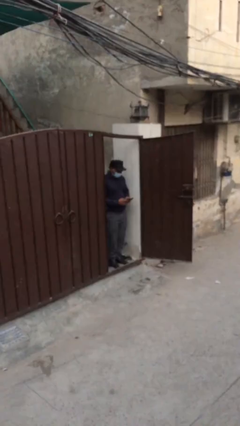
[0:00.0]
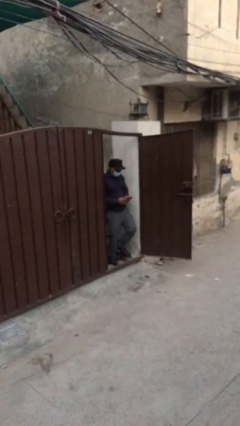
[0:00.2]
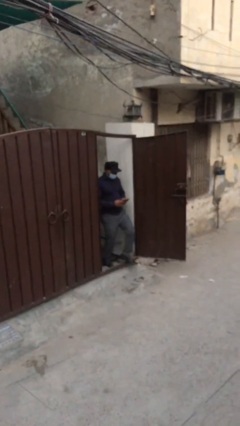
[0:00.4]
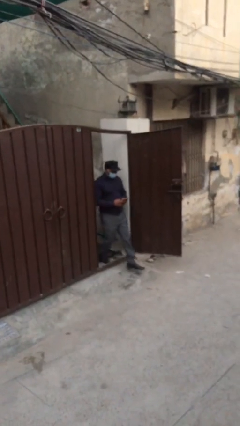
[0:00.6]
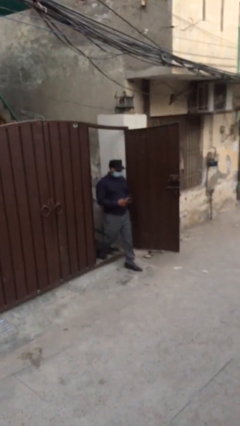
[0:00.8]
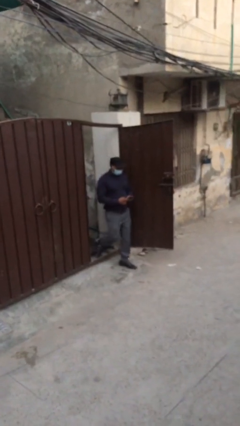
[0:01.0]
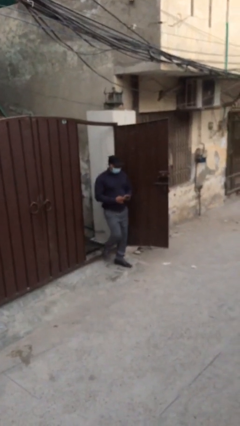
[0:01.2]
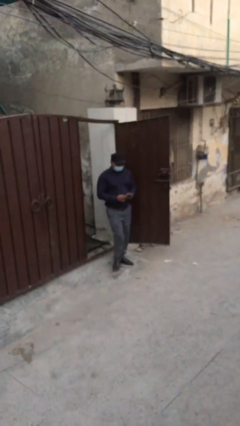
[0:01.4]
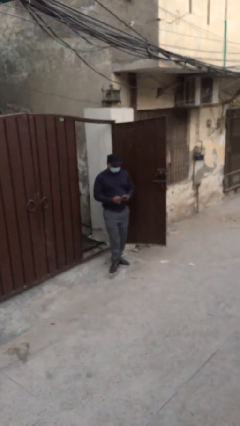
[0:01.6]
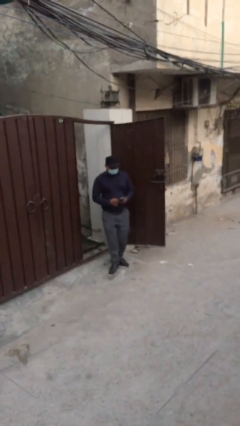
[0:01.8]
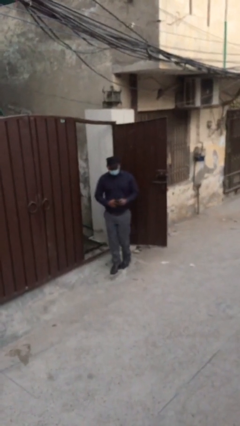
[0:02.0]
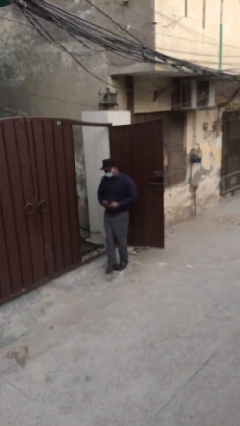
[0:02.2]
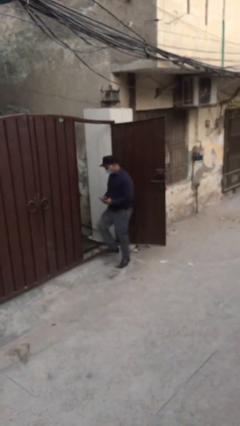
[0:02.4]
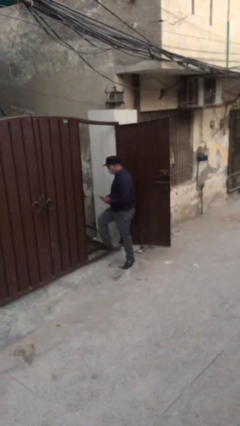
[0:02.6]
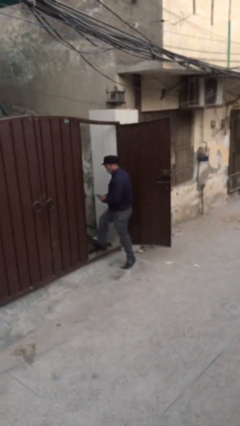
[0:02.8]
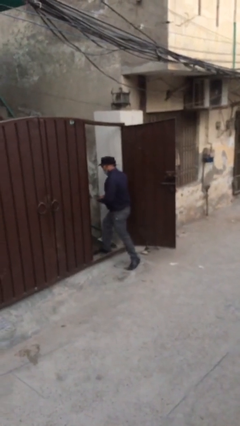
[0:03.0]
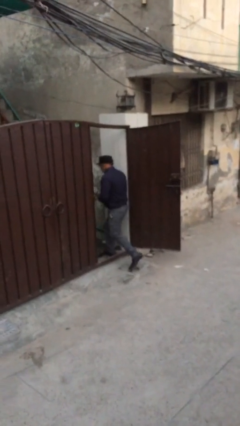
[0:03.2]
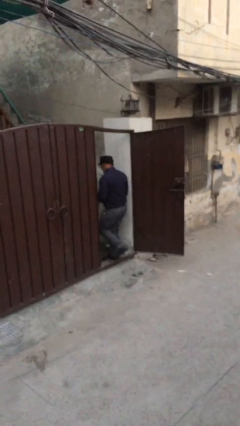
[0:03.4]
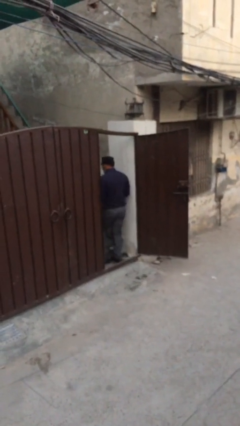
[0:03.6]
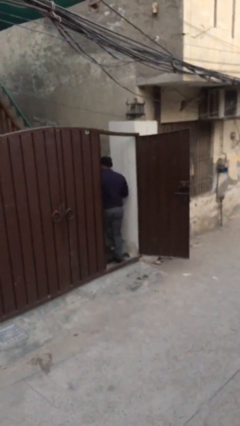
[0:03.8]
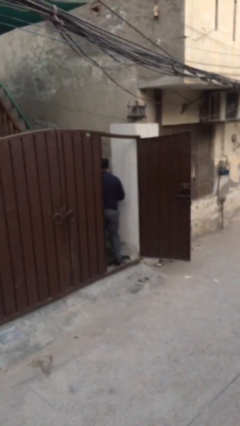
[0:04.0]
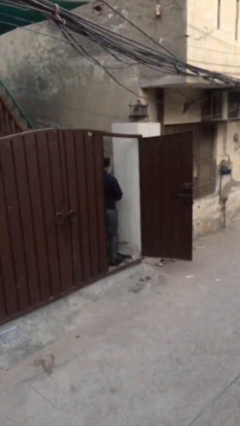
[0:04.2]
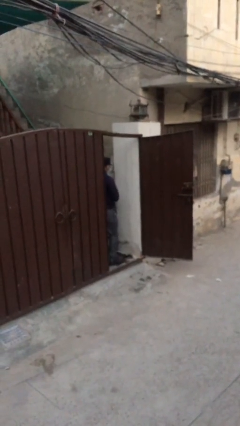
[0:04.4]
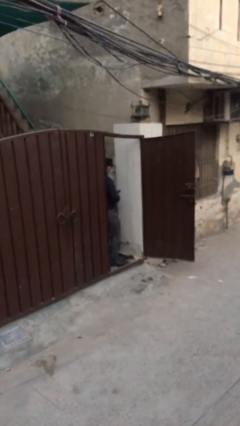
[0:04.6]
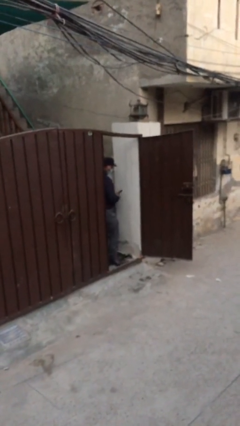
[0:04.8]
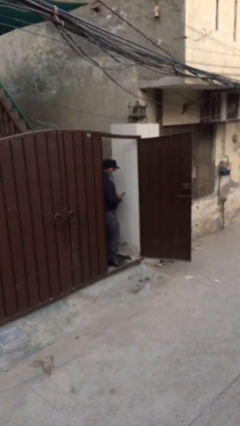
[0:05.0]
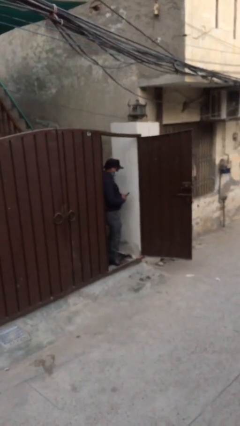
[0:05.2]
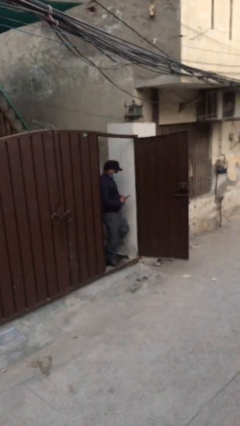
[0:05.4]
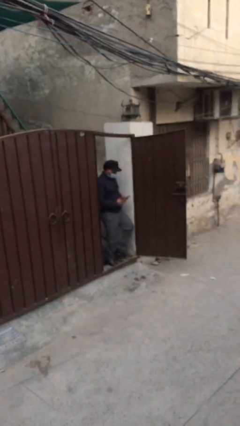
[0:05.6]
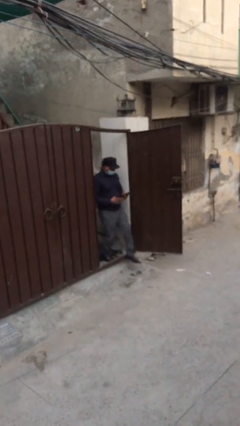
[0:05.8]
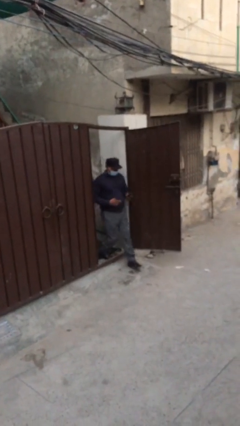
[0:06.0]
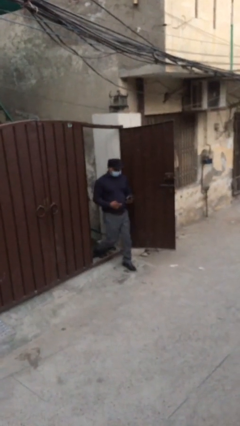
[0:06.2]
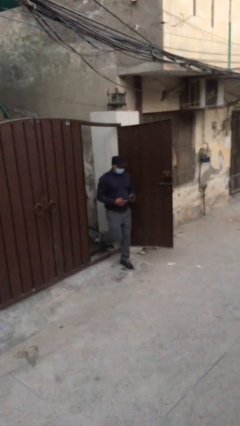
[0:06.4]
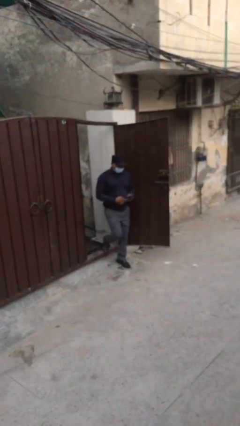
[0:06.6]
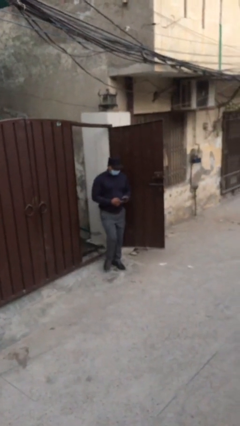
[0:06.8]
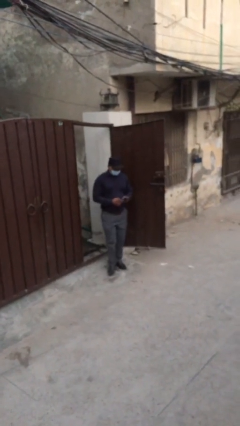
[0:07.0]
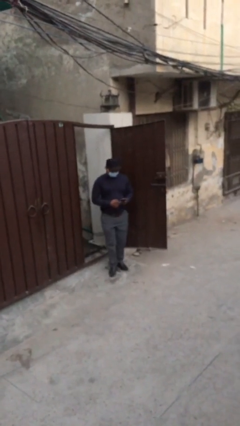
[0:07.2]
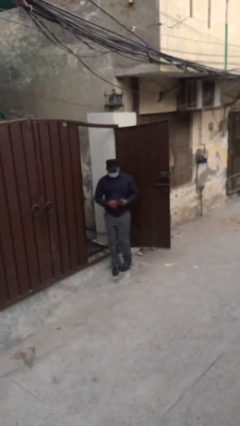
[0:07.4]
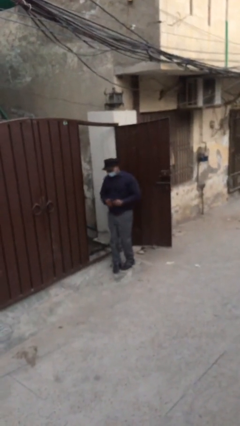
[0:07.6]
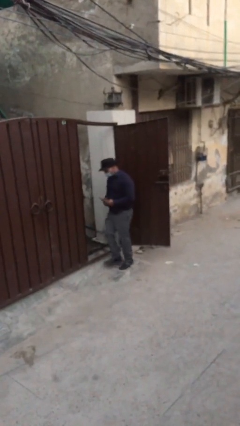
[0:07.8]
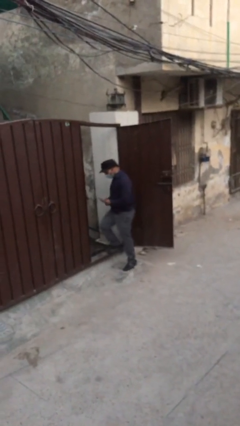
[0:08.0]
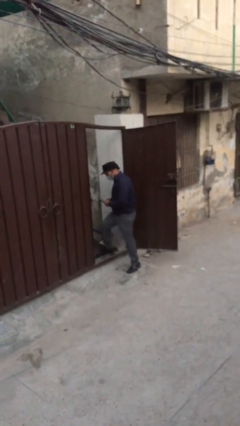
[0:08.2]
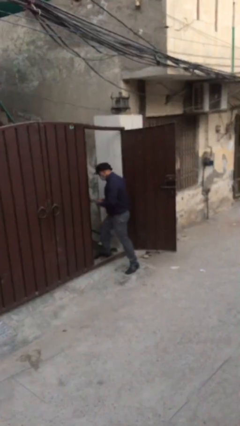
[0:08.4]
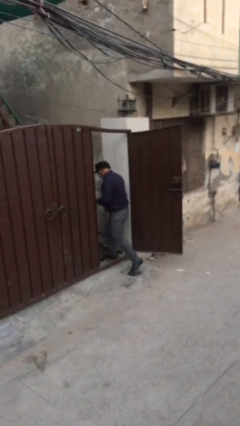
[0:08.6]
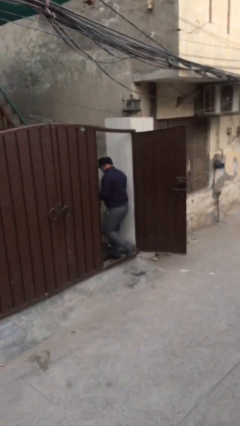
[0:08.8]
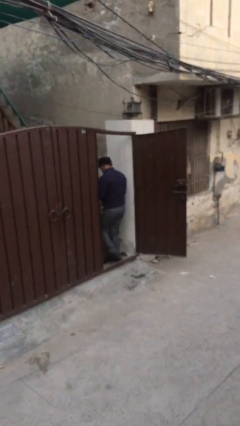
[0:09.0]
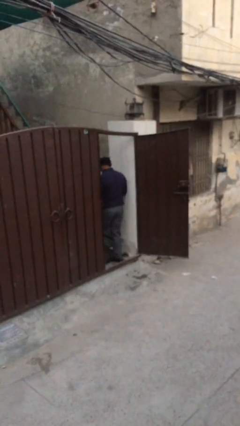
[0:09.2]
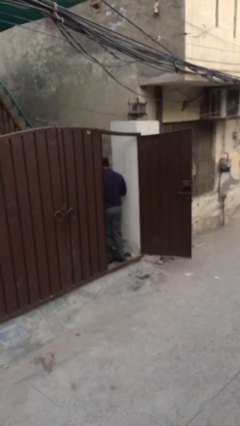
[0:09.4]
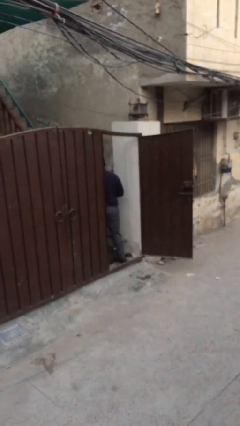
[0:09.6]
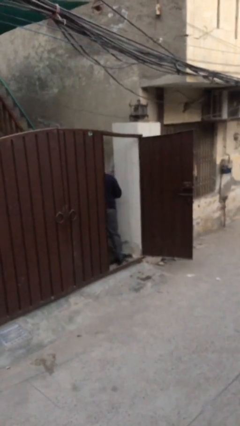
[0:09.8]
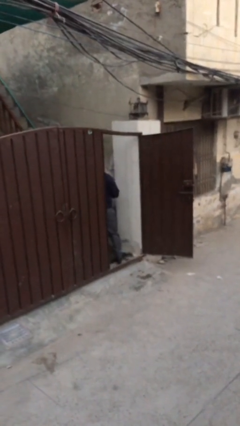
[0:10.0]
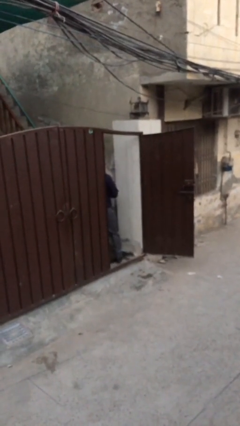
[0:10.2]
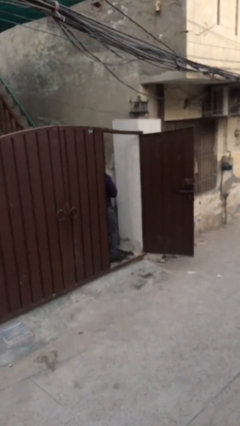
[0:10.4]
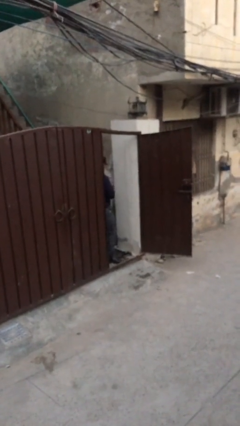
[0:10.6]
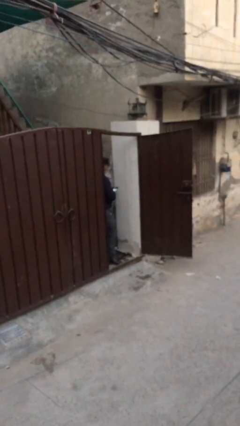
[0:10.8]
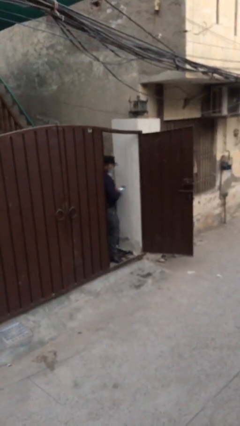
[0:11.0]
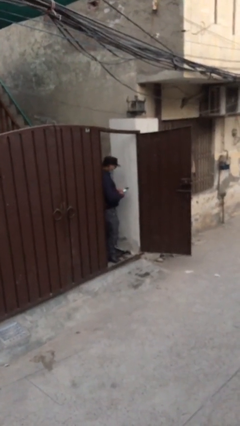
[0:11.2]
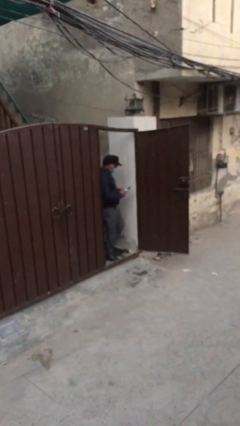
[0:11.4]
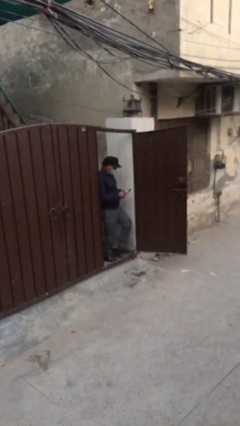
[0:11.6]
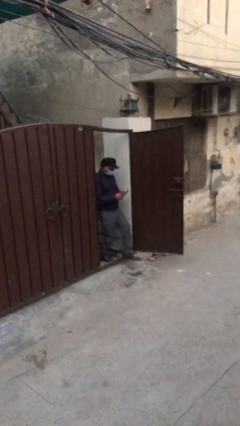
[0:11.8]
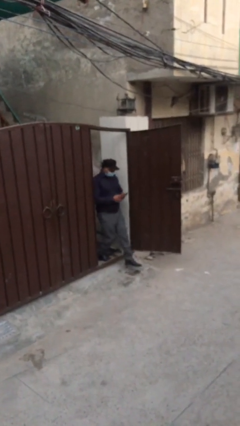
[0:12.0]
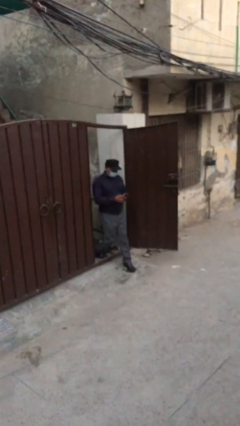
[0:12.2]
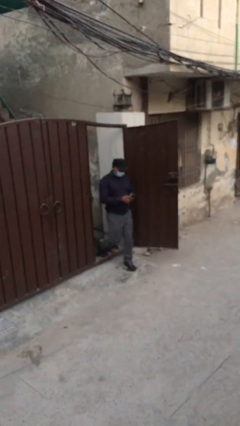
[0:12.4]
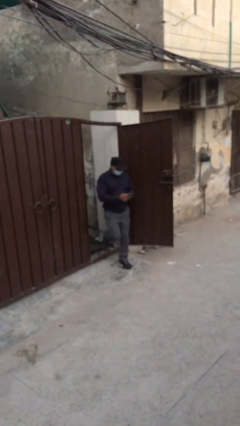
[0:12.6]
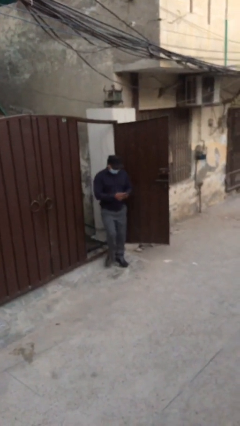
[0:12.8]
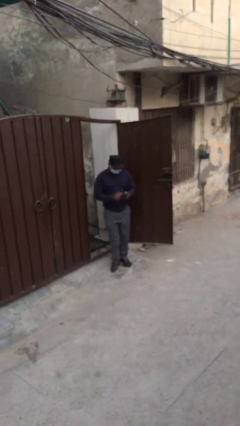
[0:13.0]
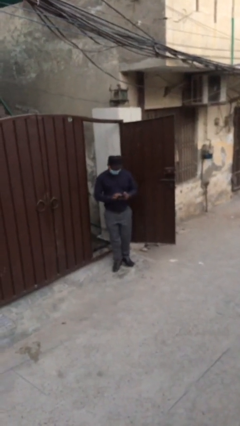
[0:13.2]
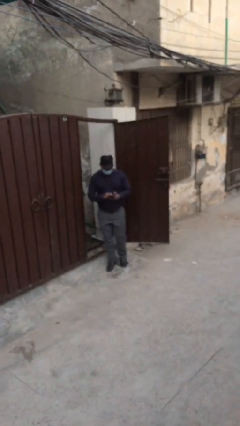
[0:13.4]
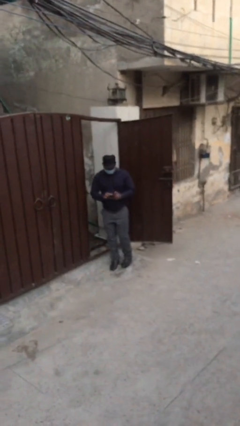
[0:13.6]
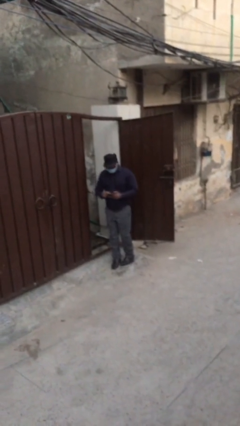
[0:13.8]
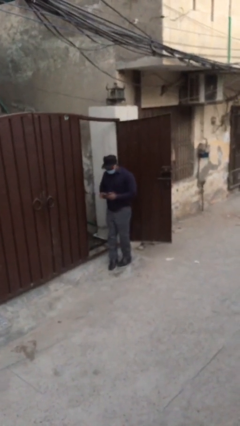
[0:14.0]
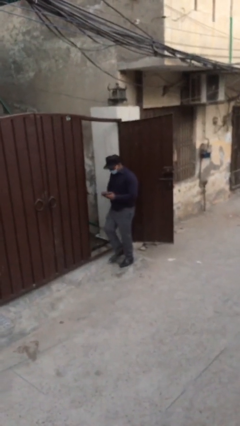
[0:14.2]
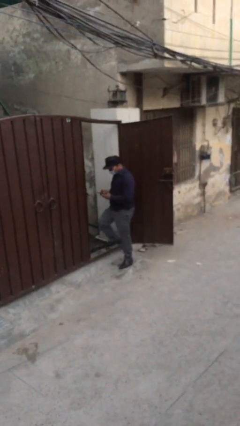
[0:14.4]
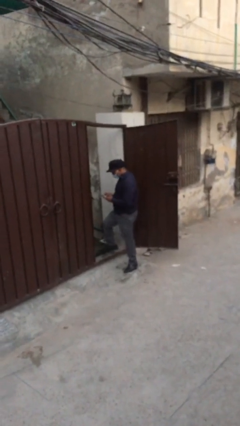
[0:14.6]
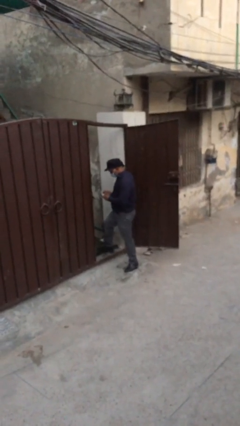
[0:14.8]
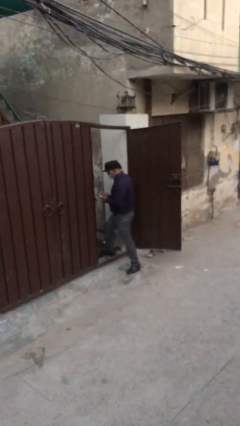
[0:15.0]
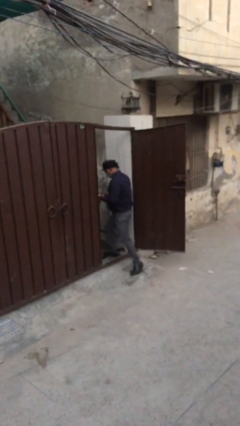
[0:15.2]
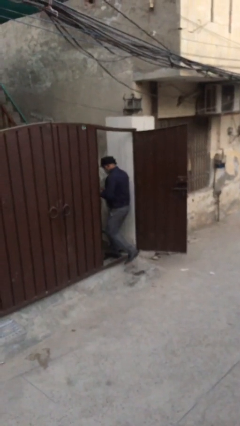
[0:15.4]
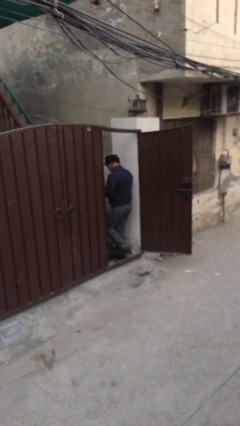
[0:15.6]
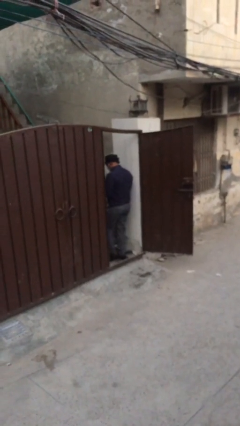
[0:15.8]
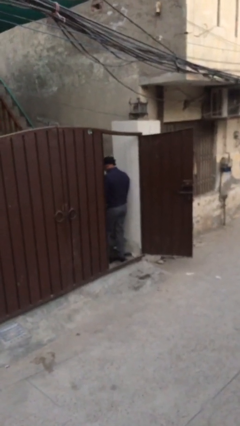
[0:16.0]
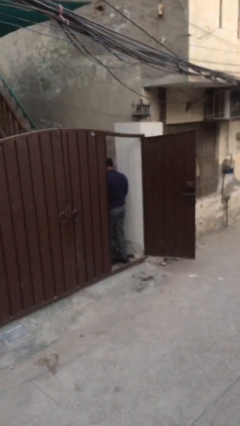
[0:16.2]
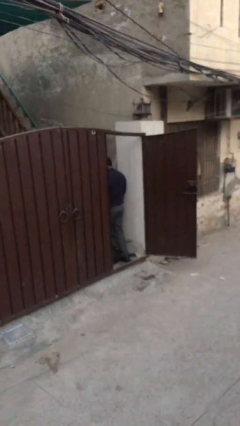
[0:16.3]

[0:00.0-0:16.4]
person texts on phone

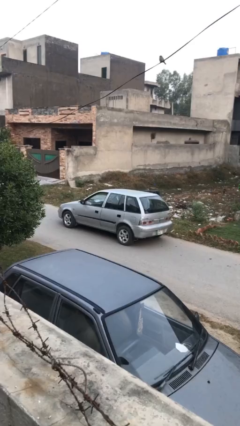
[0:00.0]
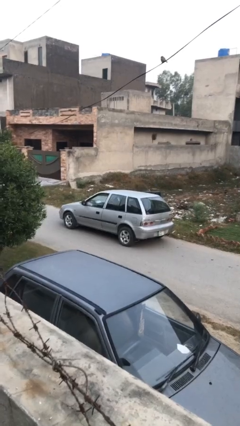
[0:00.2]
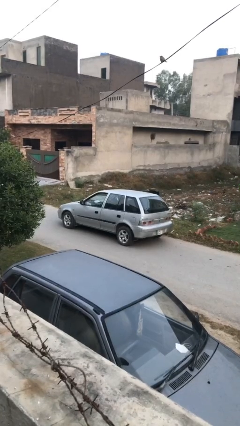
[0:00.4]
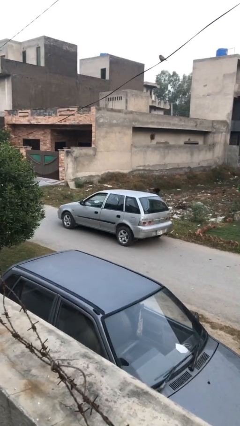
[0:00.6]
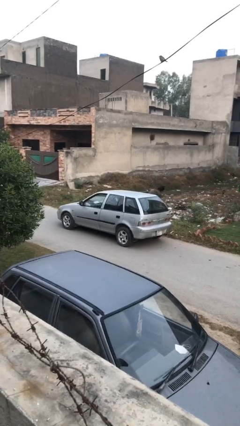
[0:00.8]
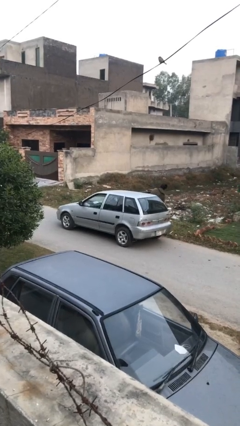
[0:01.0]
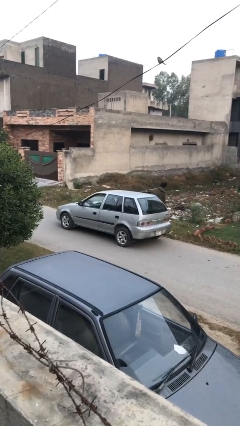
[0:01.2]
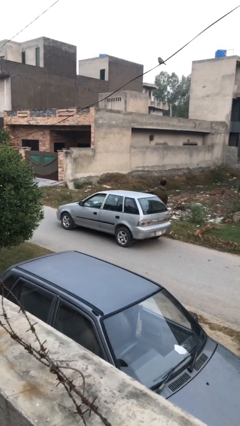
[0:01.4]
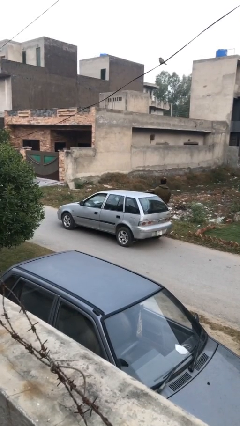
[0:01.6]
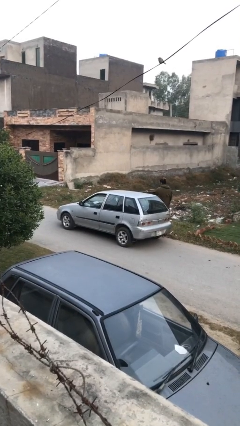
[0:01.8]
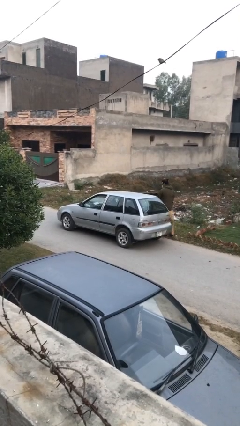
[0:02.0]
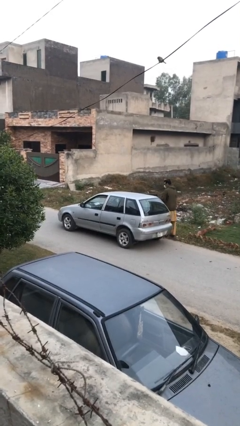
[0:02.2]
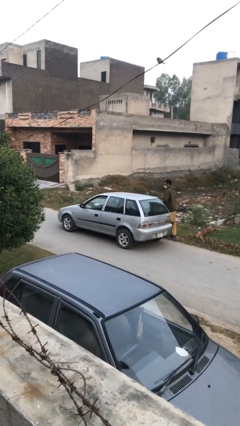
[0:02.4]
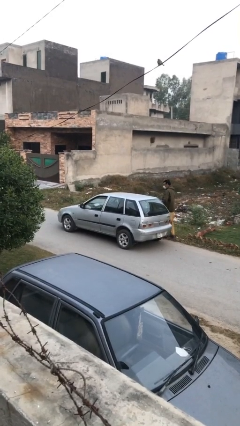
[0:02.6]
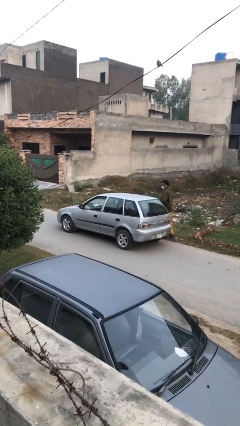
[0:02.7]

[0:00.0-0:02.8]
car drops off person
